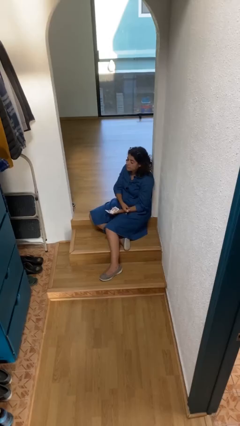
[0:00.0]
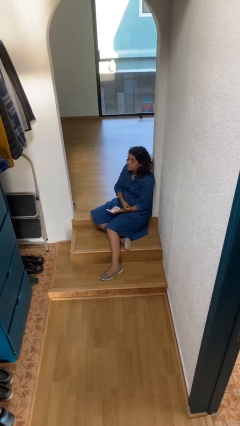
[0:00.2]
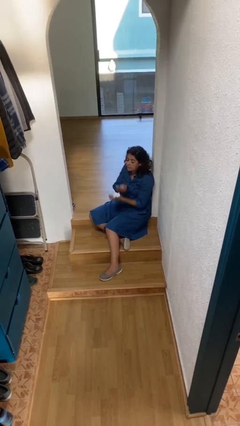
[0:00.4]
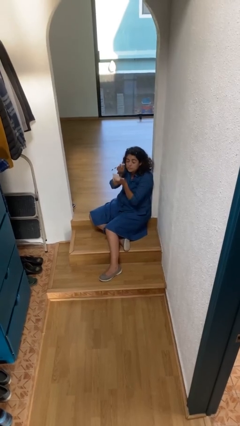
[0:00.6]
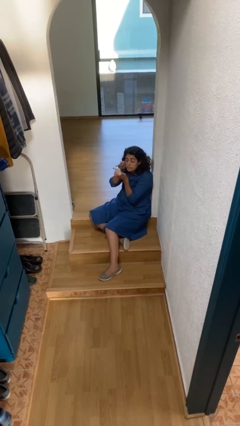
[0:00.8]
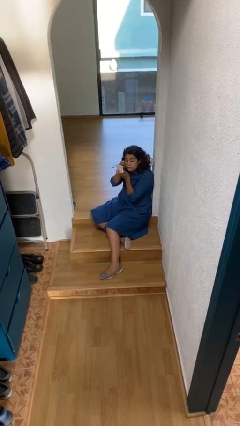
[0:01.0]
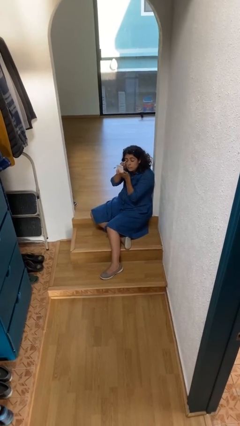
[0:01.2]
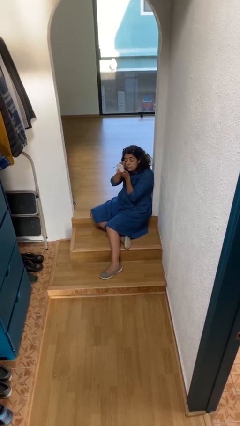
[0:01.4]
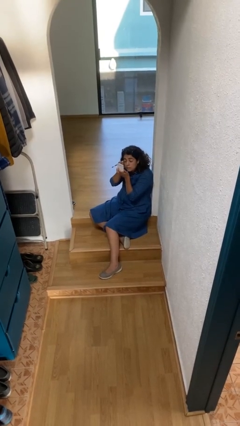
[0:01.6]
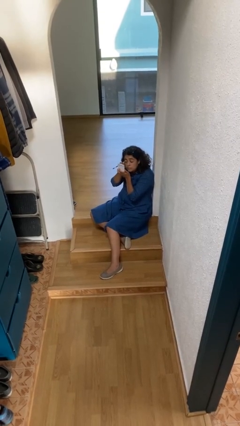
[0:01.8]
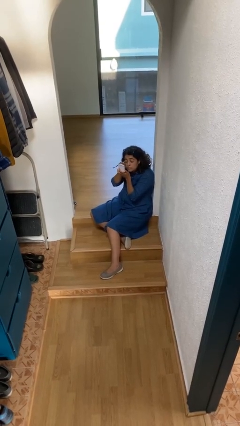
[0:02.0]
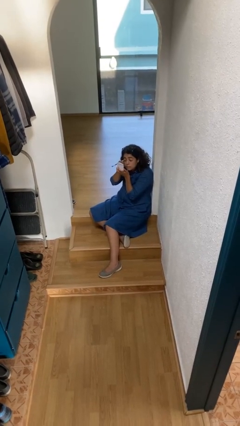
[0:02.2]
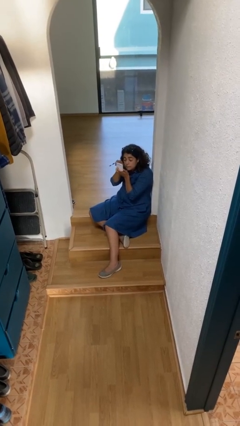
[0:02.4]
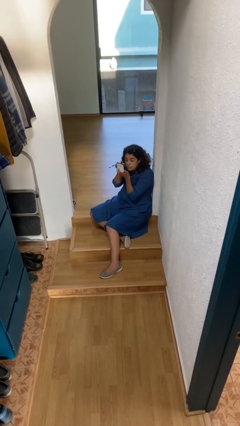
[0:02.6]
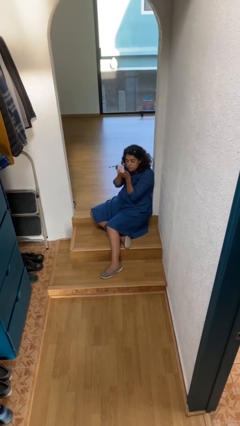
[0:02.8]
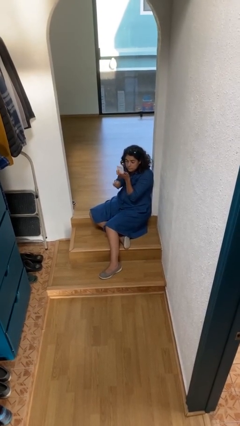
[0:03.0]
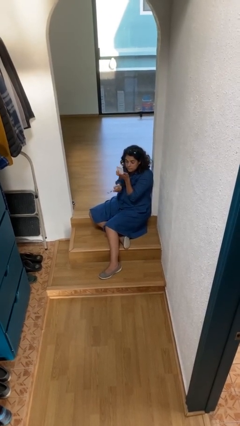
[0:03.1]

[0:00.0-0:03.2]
person applies eye makeup

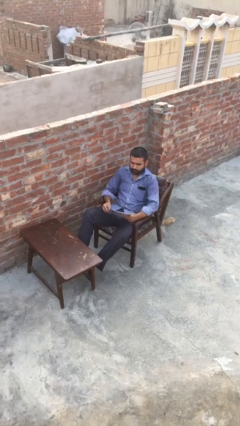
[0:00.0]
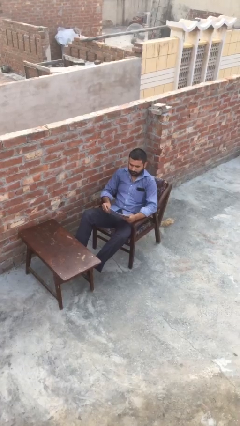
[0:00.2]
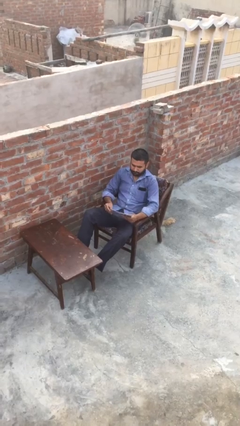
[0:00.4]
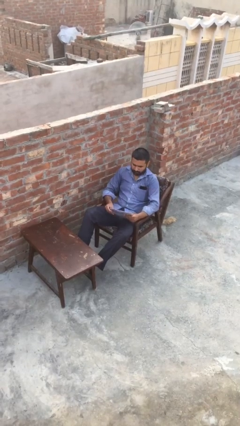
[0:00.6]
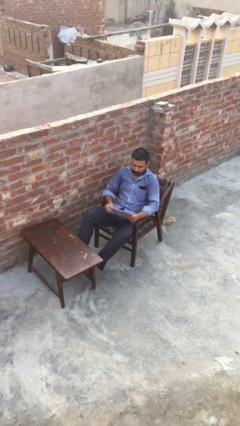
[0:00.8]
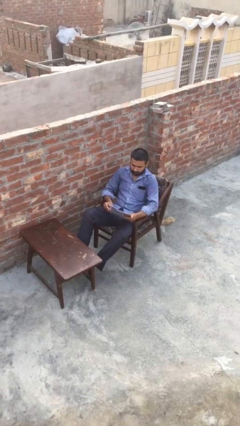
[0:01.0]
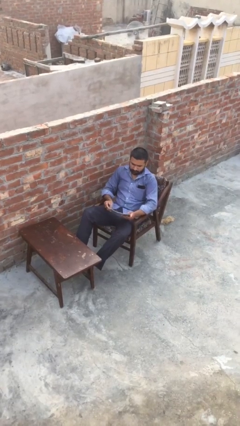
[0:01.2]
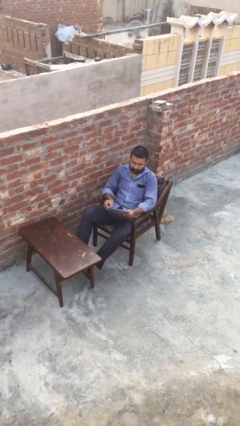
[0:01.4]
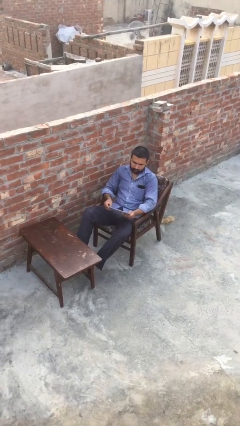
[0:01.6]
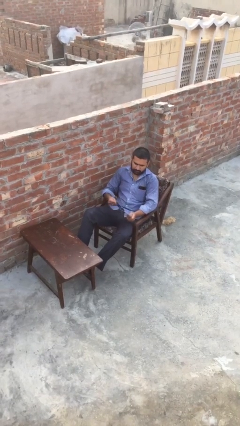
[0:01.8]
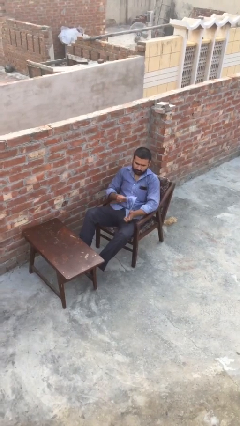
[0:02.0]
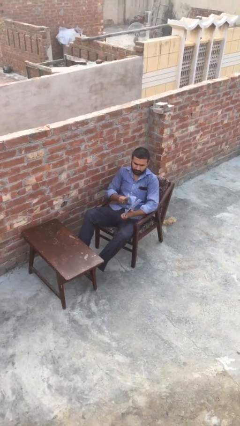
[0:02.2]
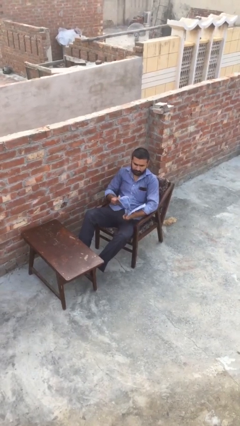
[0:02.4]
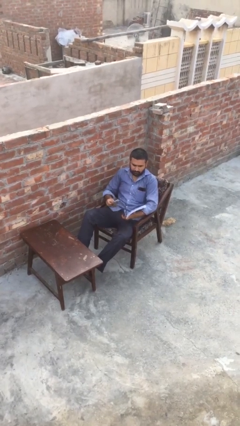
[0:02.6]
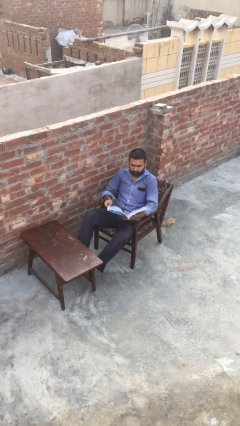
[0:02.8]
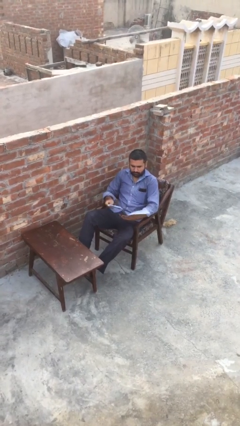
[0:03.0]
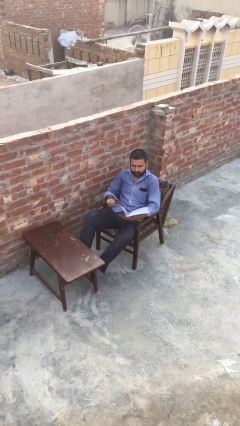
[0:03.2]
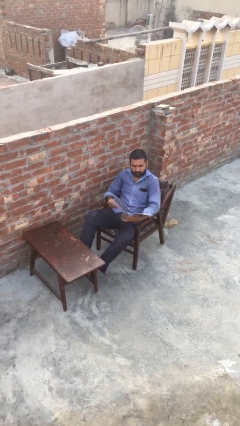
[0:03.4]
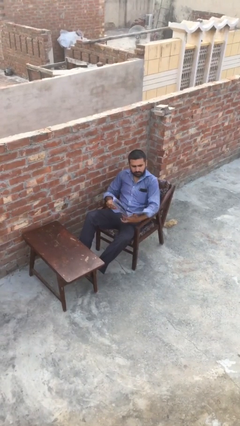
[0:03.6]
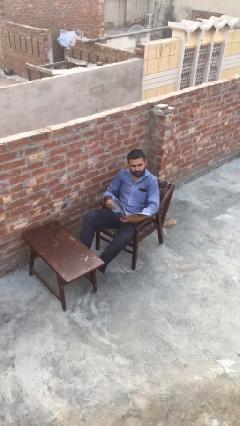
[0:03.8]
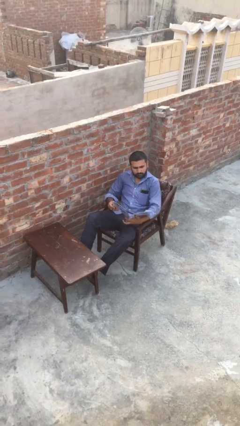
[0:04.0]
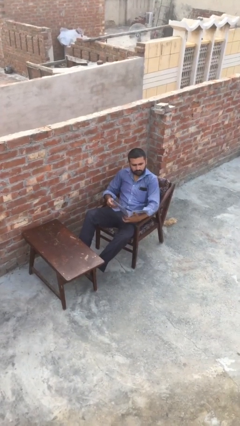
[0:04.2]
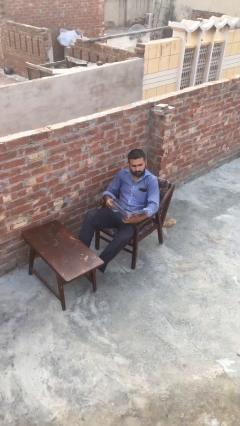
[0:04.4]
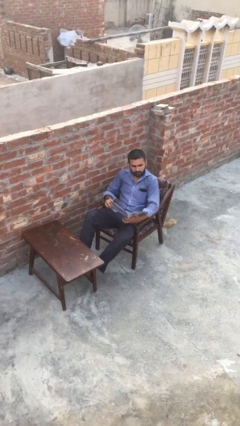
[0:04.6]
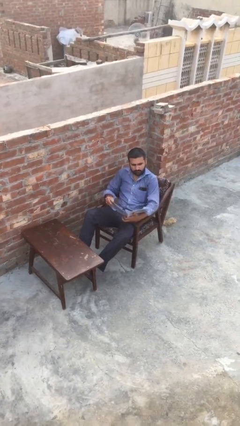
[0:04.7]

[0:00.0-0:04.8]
person reads document

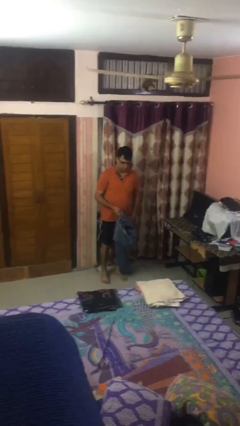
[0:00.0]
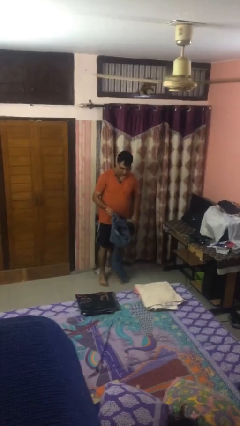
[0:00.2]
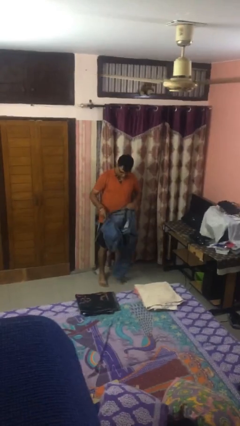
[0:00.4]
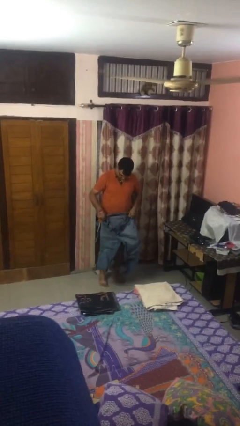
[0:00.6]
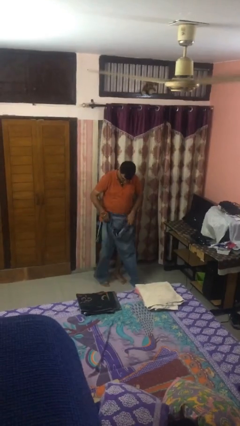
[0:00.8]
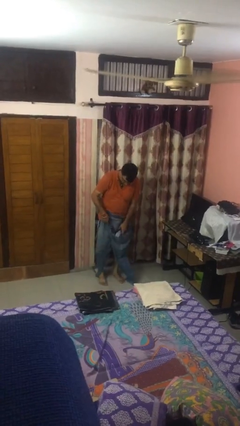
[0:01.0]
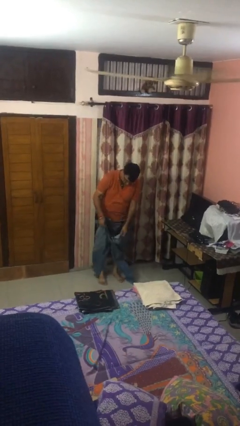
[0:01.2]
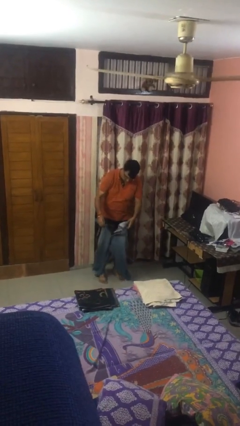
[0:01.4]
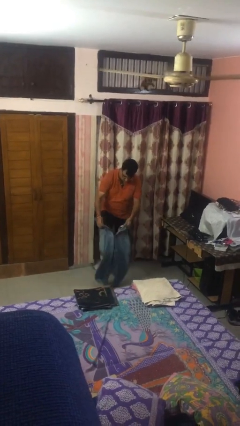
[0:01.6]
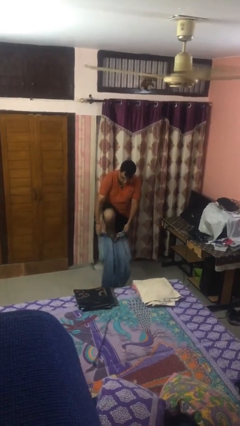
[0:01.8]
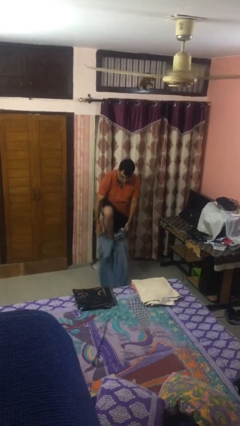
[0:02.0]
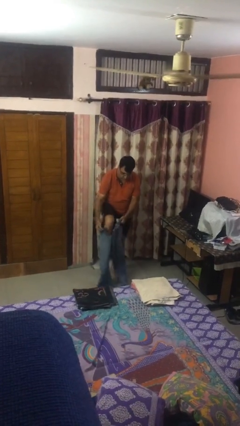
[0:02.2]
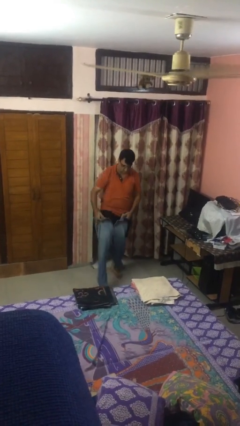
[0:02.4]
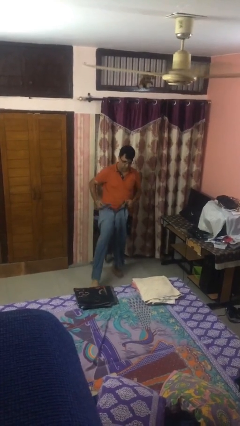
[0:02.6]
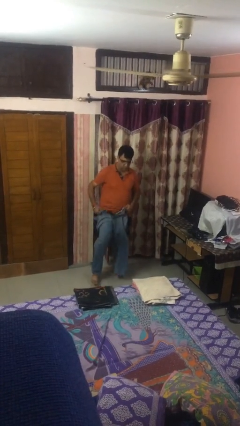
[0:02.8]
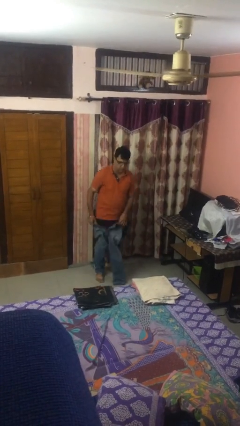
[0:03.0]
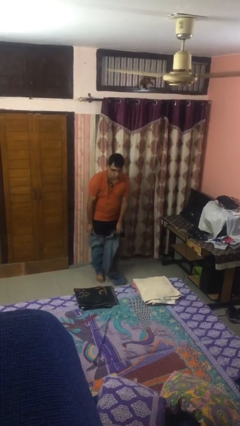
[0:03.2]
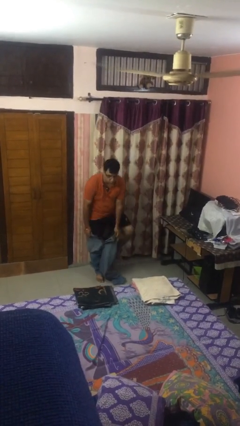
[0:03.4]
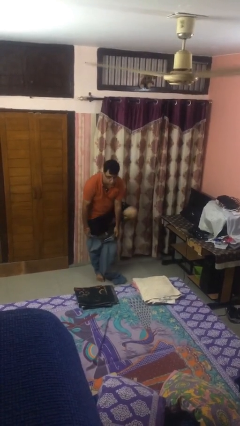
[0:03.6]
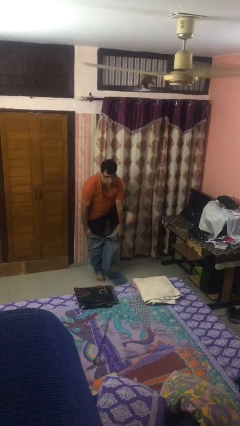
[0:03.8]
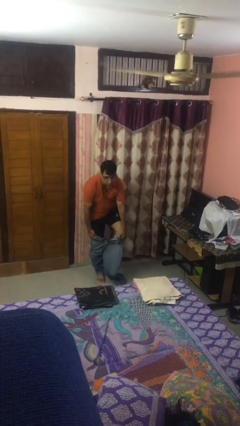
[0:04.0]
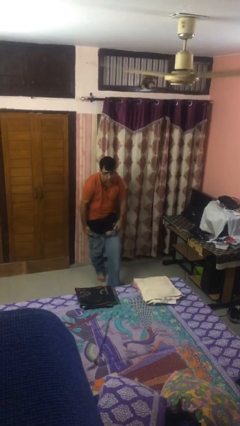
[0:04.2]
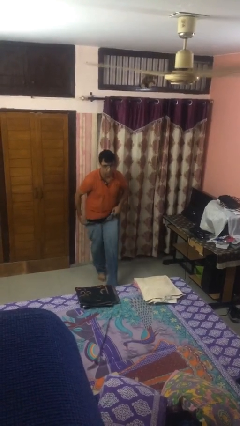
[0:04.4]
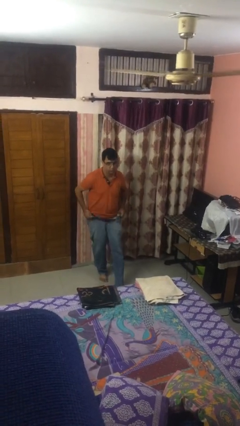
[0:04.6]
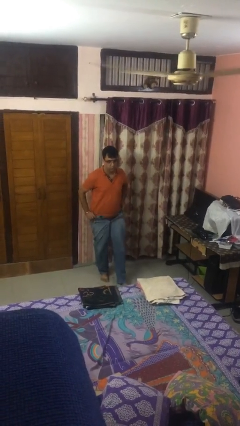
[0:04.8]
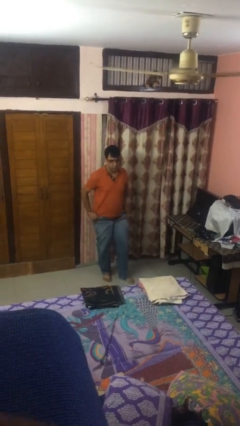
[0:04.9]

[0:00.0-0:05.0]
person puts on pants

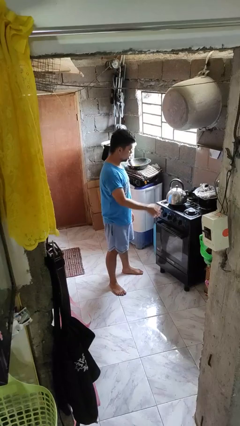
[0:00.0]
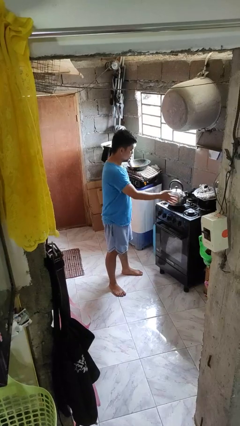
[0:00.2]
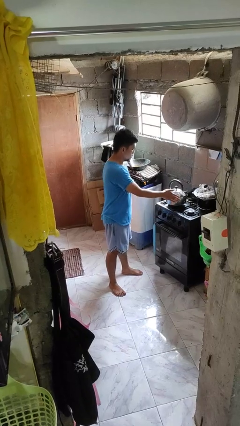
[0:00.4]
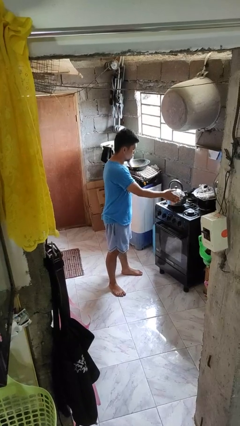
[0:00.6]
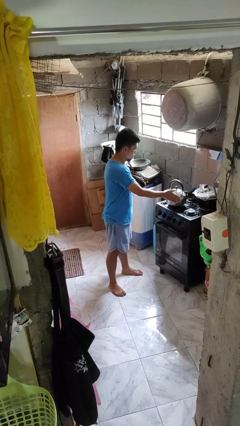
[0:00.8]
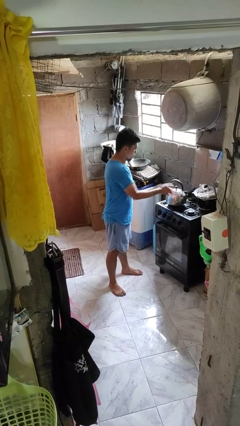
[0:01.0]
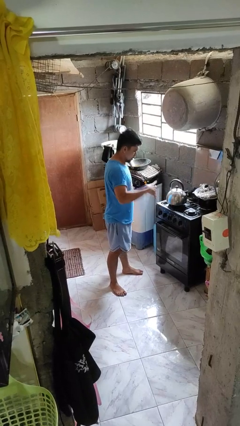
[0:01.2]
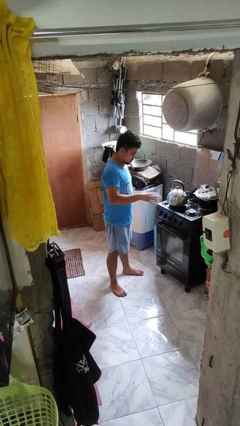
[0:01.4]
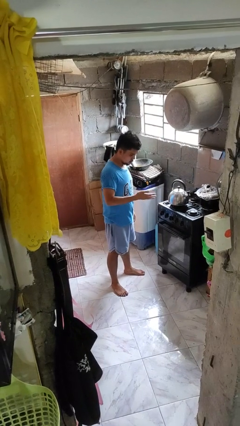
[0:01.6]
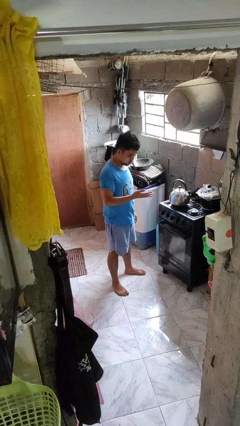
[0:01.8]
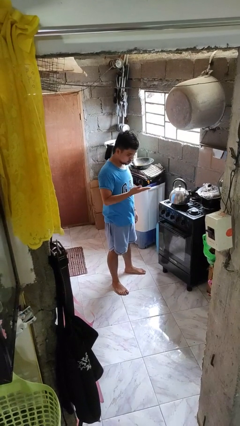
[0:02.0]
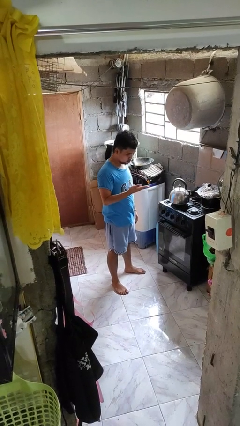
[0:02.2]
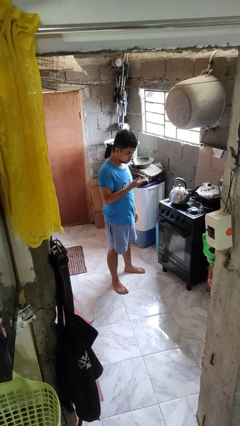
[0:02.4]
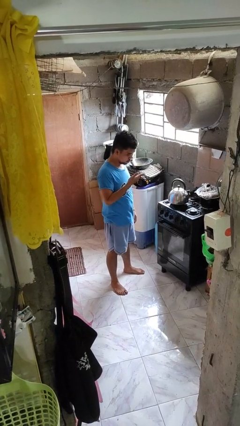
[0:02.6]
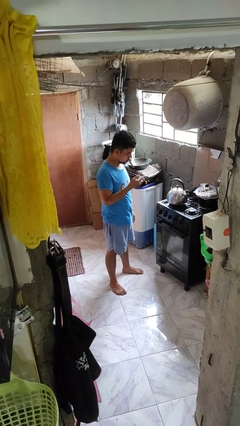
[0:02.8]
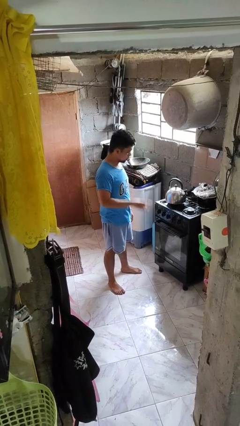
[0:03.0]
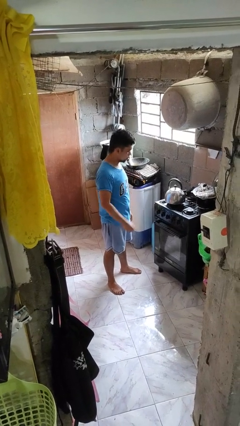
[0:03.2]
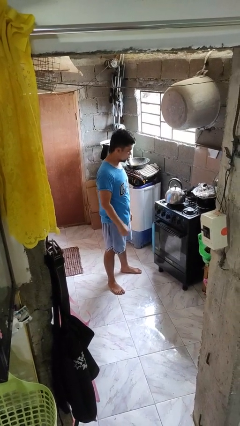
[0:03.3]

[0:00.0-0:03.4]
person burns hand

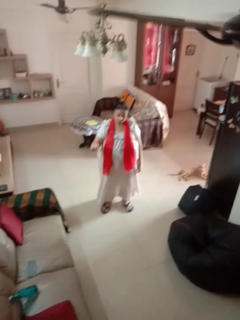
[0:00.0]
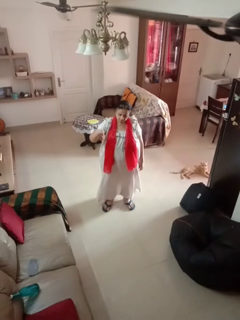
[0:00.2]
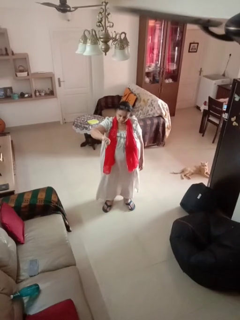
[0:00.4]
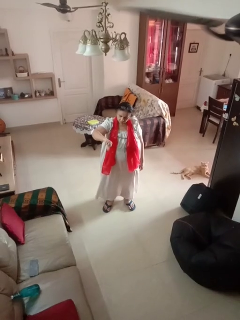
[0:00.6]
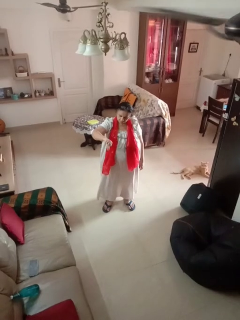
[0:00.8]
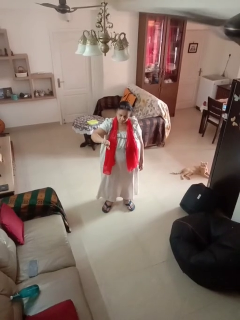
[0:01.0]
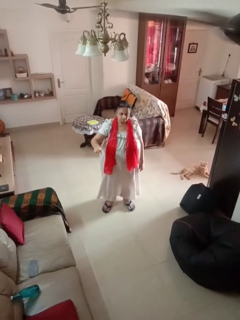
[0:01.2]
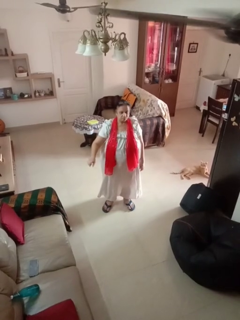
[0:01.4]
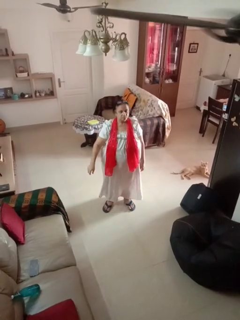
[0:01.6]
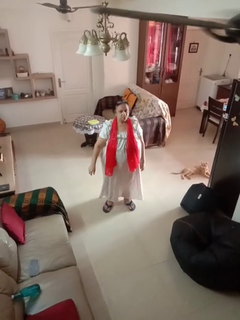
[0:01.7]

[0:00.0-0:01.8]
person gestures thumbs down

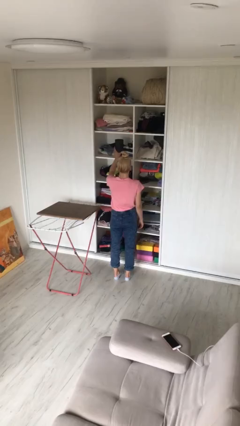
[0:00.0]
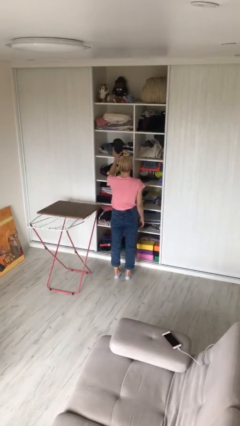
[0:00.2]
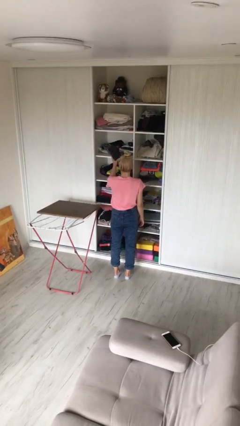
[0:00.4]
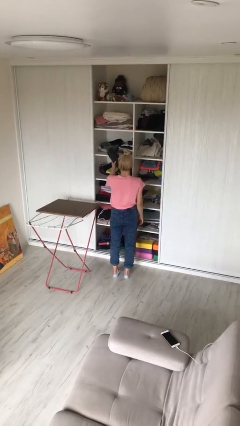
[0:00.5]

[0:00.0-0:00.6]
person picks up object from shelf
